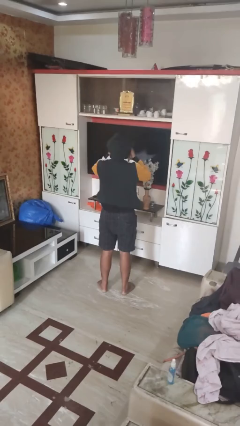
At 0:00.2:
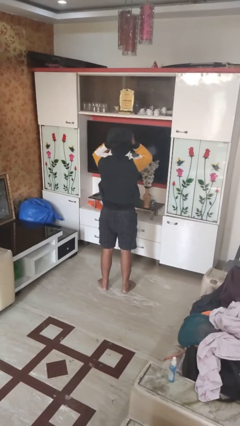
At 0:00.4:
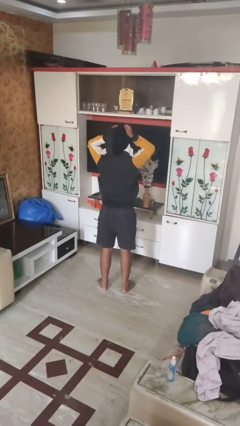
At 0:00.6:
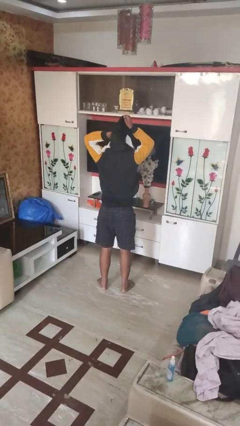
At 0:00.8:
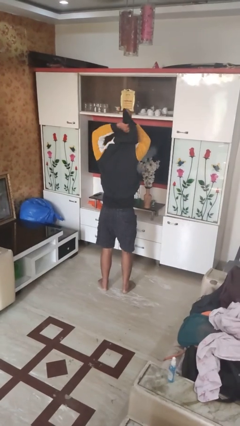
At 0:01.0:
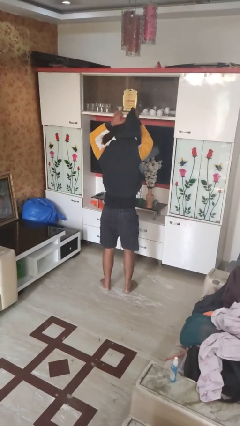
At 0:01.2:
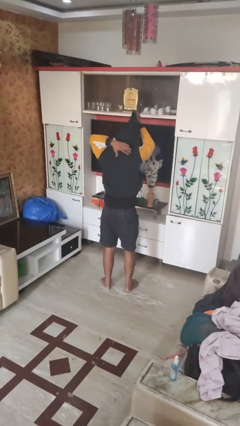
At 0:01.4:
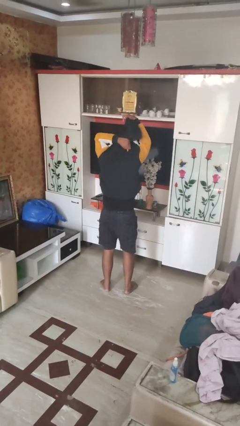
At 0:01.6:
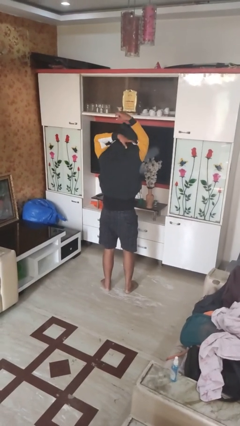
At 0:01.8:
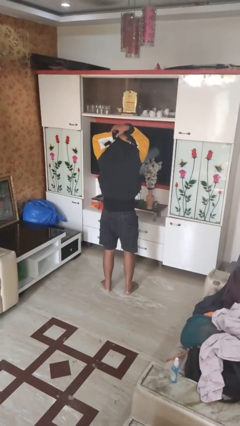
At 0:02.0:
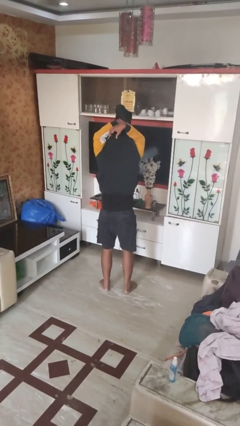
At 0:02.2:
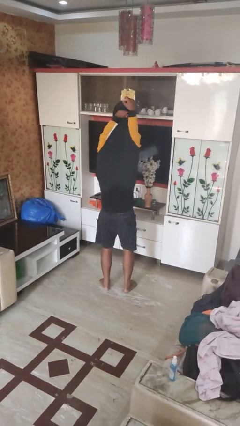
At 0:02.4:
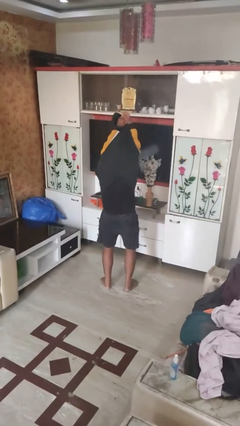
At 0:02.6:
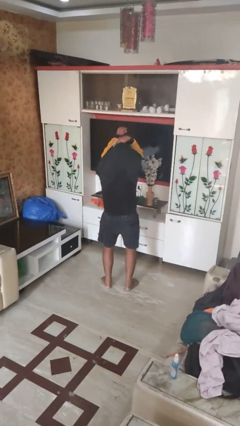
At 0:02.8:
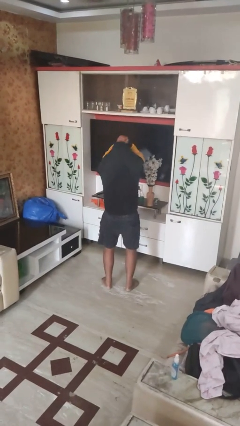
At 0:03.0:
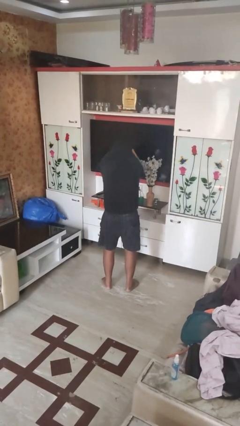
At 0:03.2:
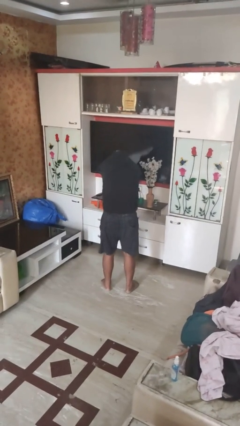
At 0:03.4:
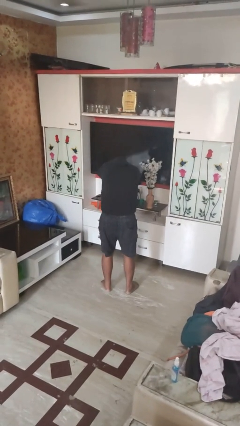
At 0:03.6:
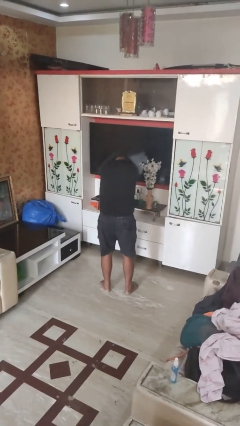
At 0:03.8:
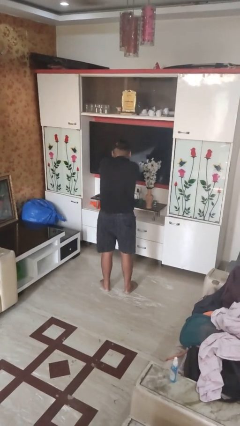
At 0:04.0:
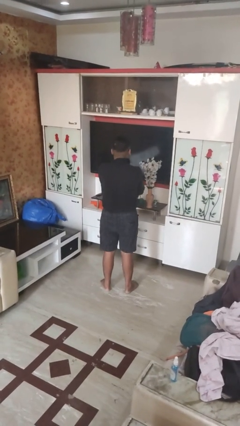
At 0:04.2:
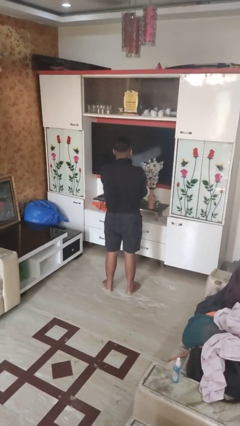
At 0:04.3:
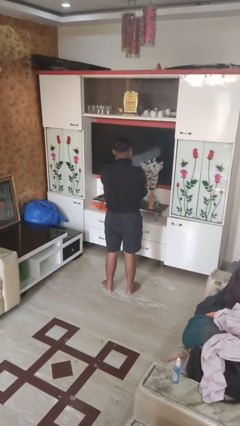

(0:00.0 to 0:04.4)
person takes off hoodie

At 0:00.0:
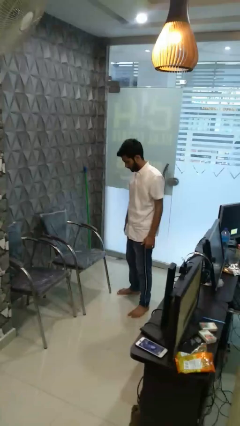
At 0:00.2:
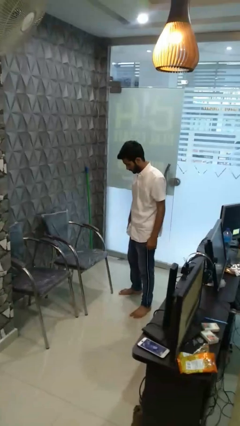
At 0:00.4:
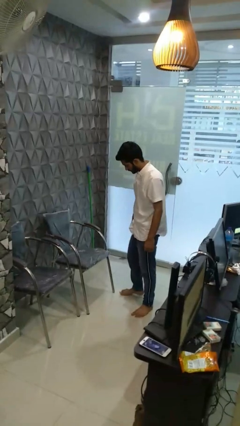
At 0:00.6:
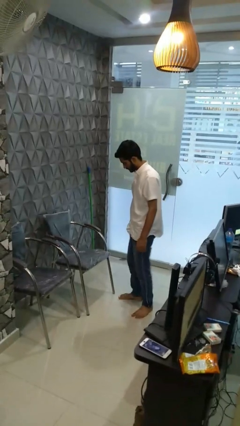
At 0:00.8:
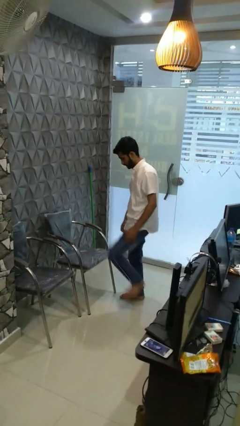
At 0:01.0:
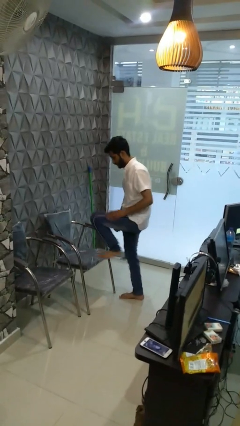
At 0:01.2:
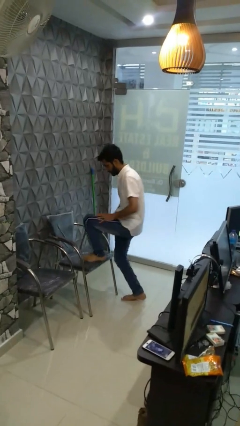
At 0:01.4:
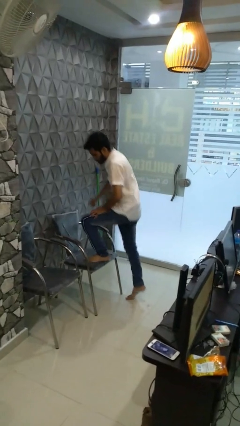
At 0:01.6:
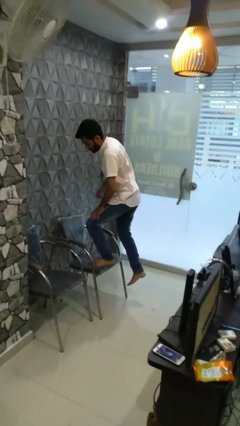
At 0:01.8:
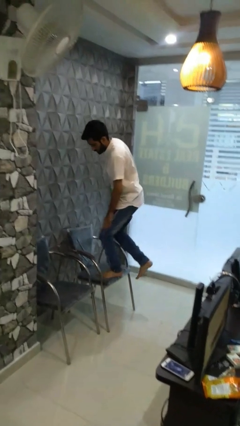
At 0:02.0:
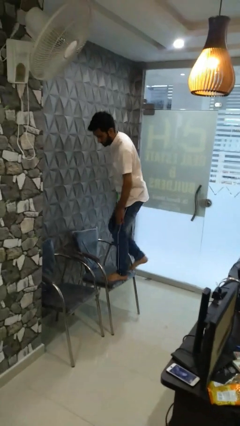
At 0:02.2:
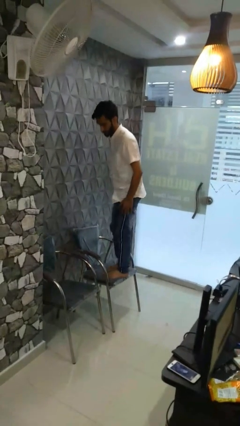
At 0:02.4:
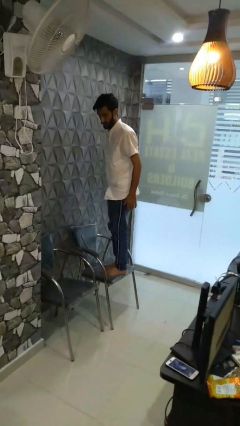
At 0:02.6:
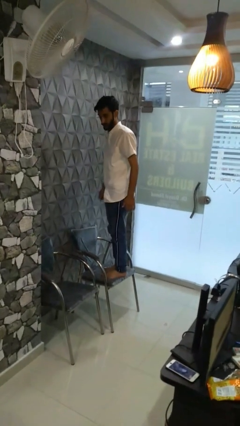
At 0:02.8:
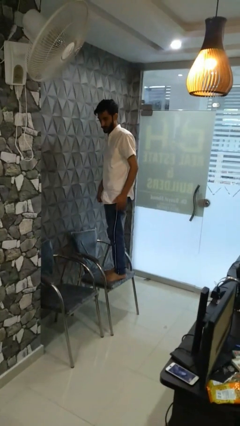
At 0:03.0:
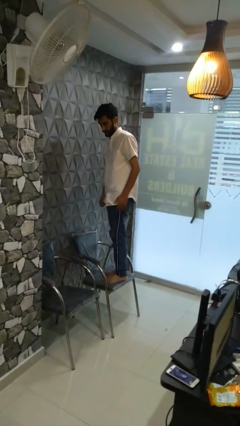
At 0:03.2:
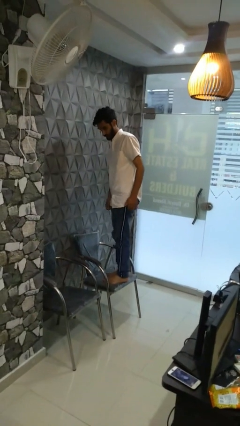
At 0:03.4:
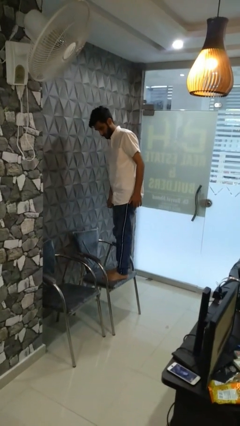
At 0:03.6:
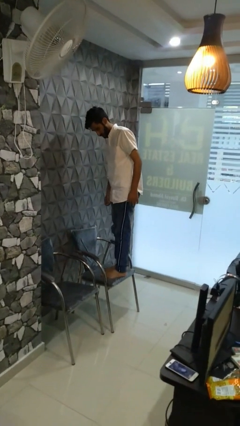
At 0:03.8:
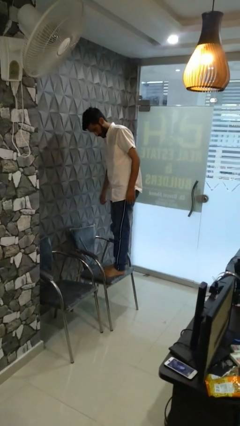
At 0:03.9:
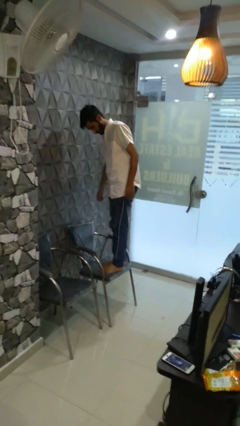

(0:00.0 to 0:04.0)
person climbs on chair

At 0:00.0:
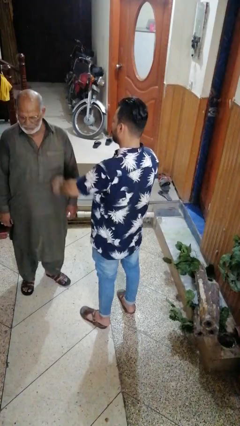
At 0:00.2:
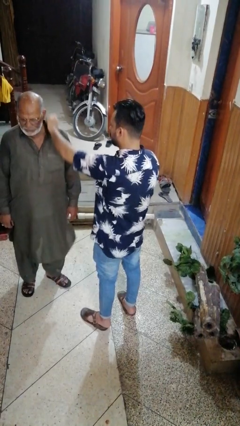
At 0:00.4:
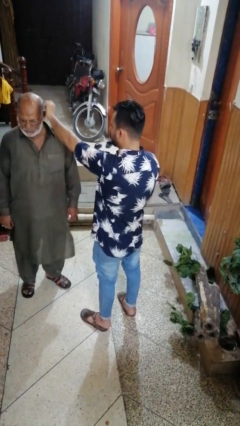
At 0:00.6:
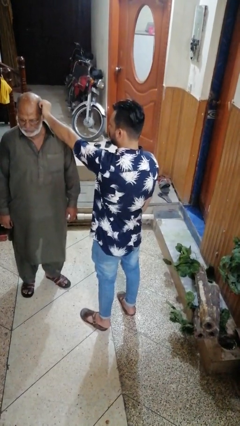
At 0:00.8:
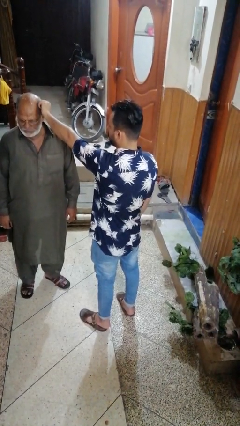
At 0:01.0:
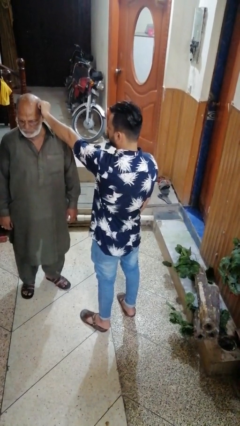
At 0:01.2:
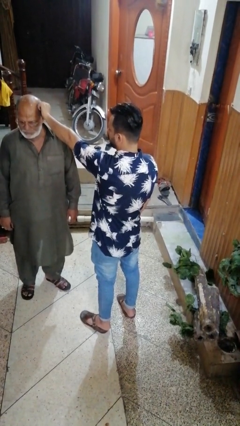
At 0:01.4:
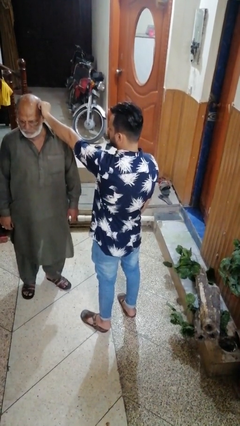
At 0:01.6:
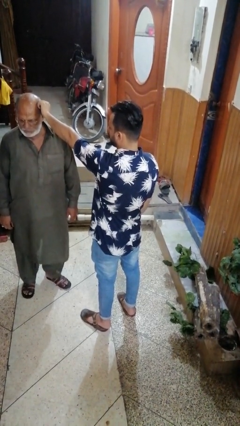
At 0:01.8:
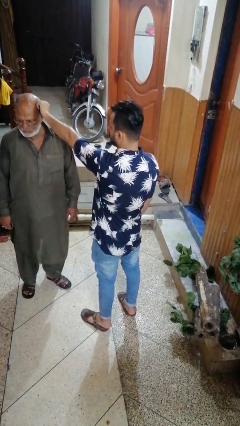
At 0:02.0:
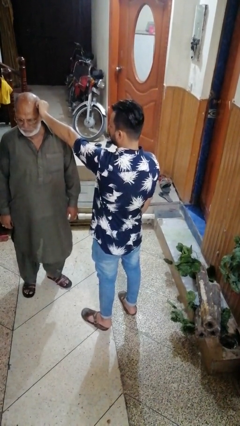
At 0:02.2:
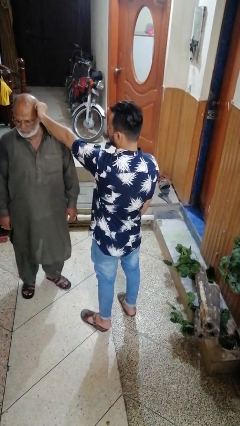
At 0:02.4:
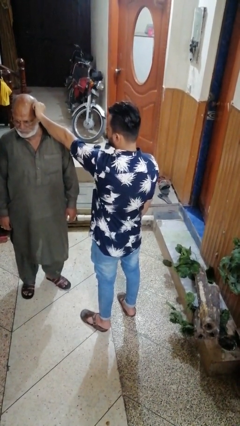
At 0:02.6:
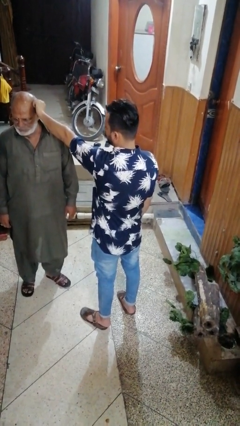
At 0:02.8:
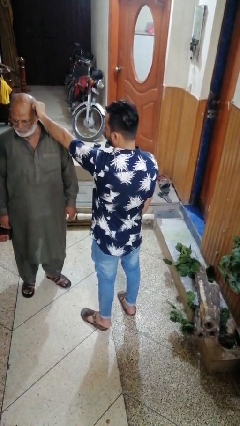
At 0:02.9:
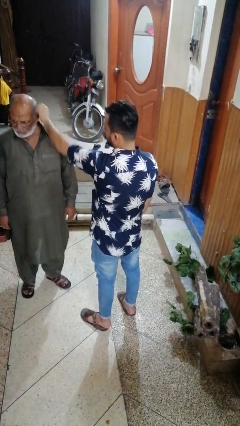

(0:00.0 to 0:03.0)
person grabs person by hair

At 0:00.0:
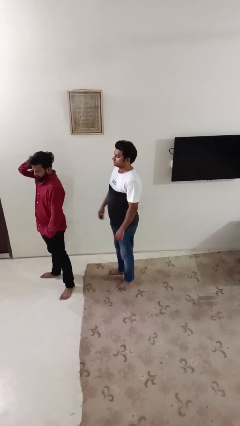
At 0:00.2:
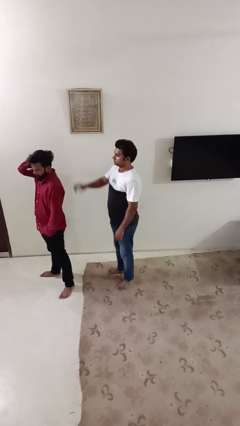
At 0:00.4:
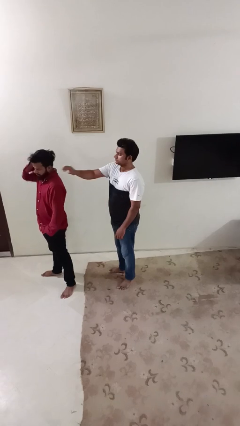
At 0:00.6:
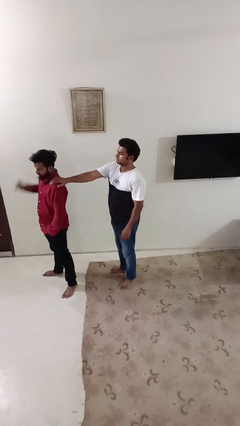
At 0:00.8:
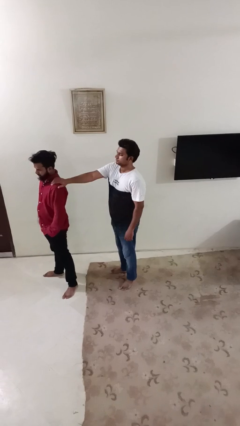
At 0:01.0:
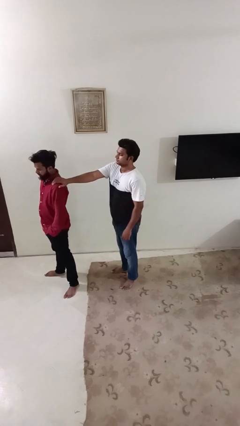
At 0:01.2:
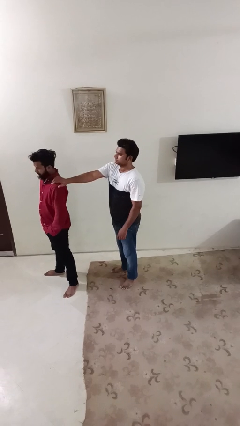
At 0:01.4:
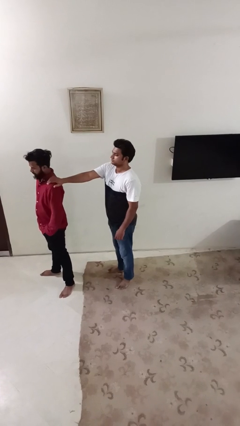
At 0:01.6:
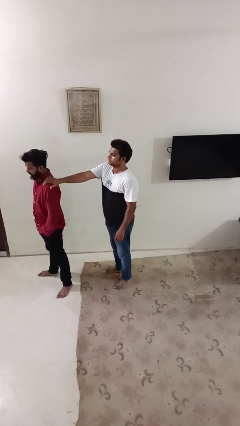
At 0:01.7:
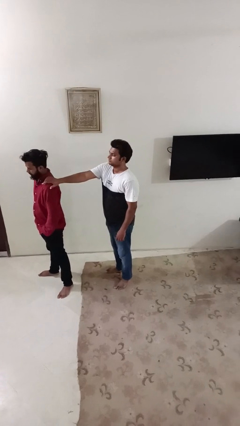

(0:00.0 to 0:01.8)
person grabs person by shoulder

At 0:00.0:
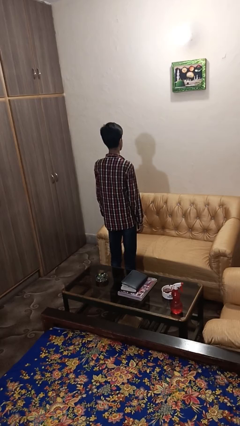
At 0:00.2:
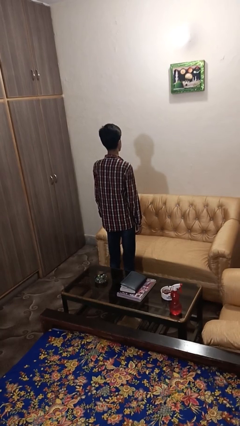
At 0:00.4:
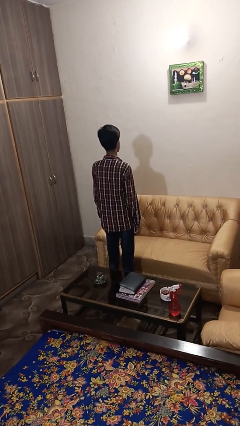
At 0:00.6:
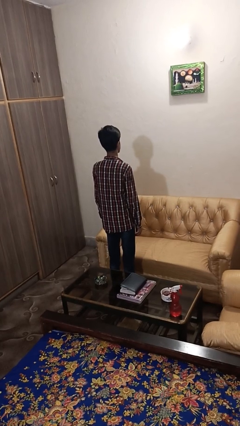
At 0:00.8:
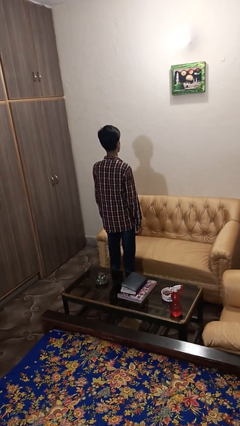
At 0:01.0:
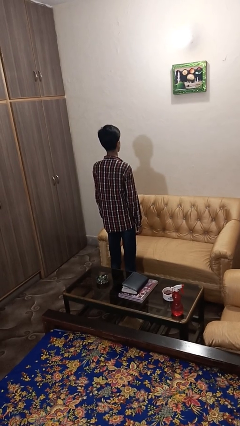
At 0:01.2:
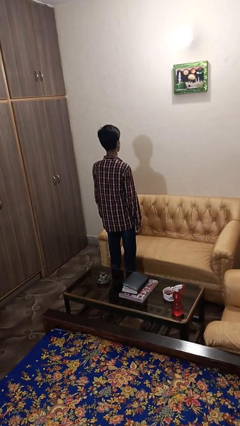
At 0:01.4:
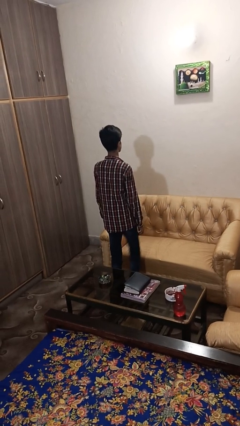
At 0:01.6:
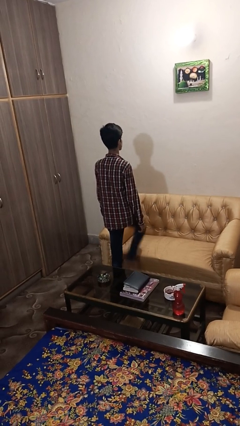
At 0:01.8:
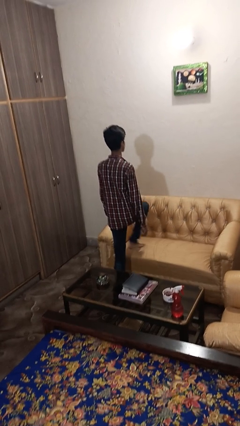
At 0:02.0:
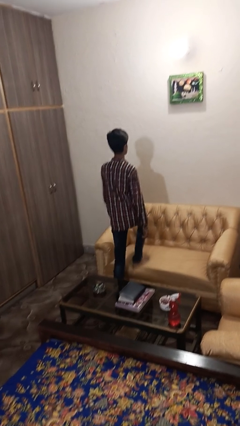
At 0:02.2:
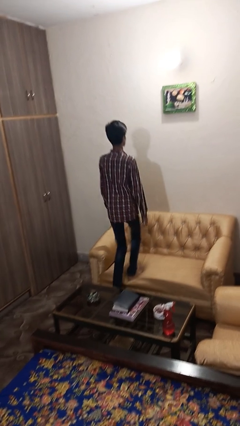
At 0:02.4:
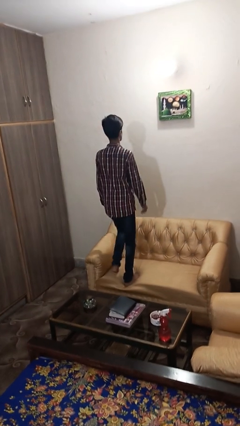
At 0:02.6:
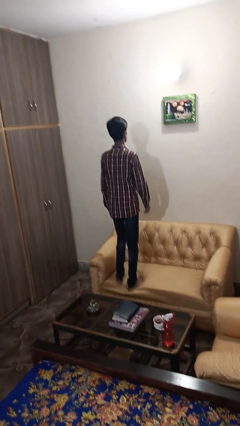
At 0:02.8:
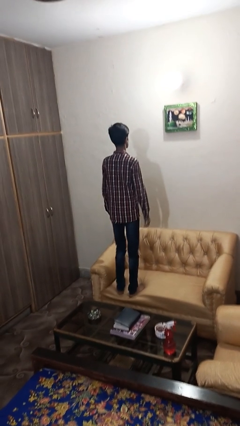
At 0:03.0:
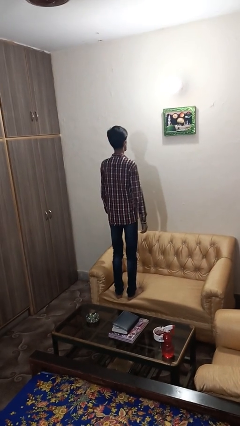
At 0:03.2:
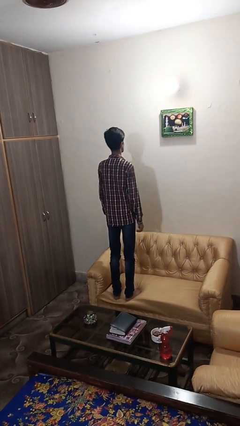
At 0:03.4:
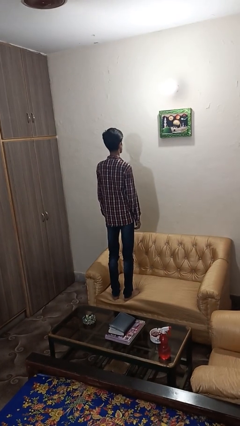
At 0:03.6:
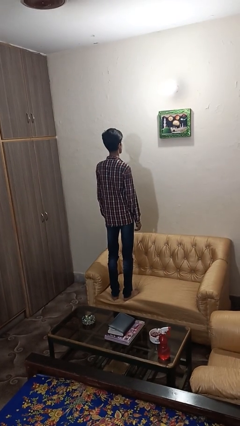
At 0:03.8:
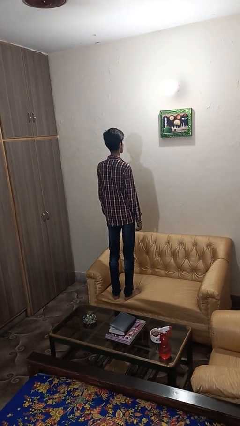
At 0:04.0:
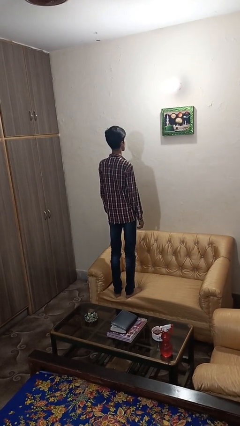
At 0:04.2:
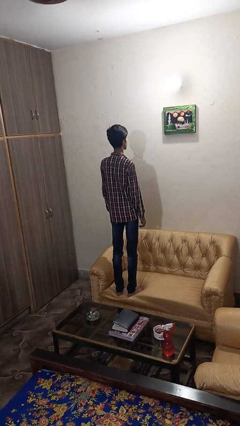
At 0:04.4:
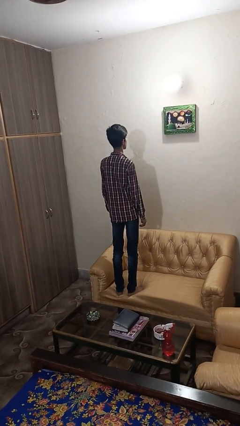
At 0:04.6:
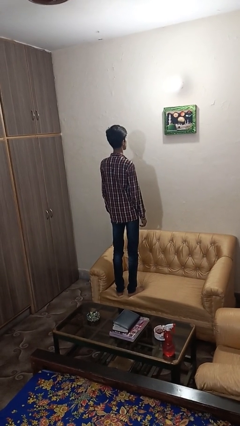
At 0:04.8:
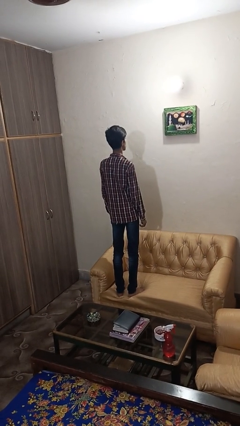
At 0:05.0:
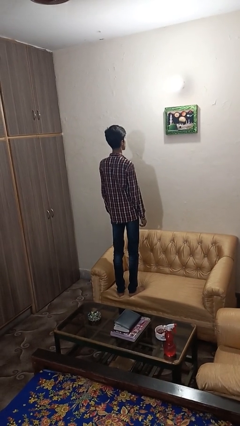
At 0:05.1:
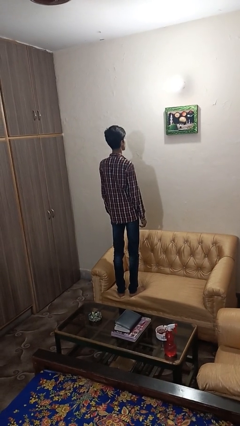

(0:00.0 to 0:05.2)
person climbs on couch
